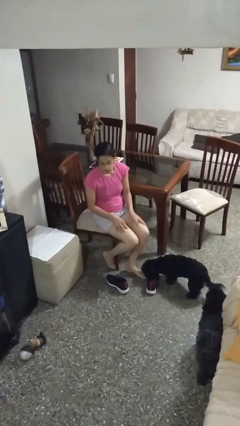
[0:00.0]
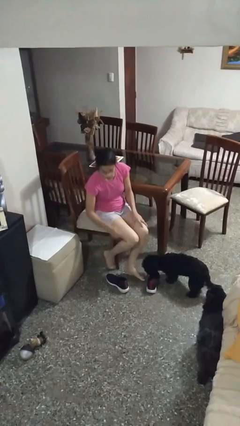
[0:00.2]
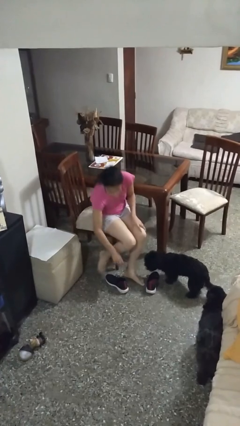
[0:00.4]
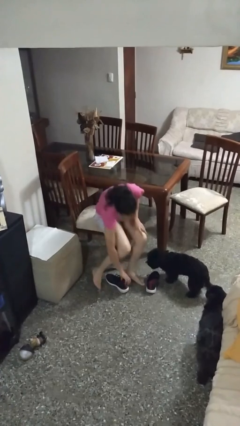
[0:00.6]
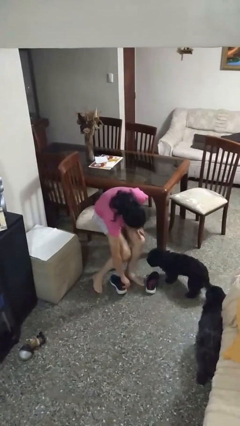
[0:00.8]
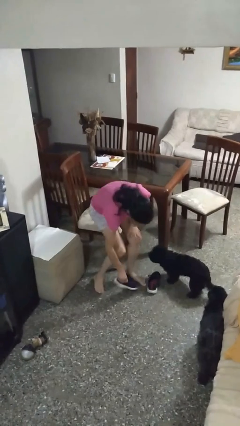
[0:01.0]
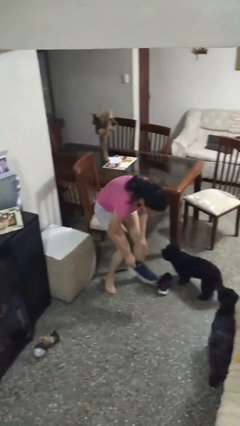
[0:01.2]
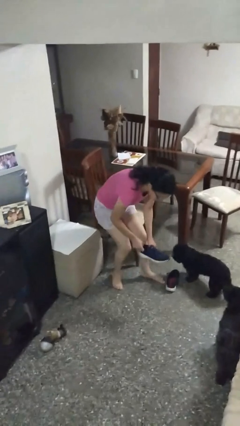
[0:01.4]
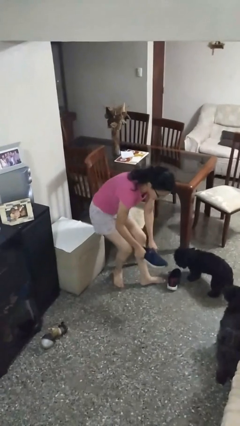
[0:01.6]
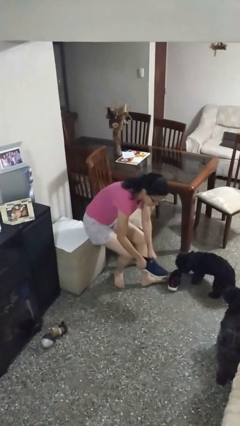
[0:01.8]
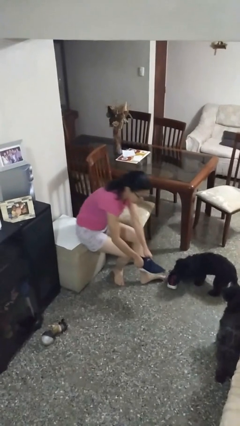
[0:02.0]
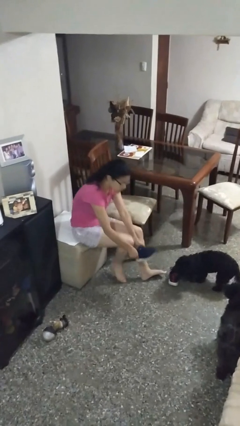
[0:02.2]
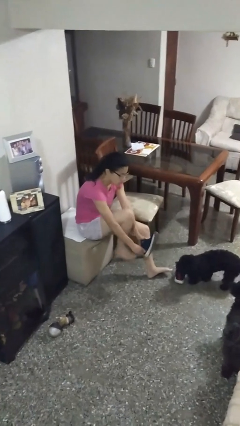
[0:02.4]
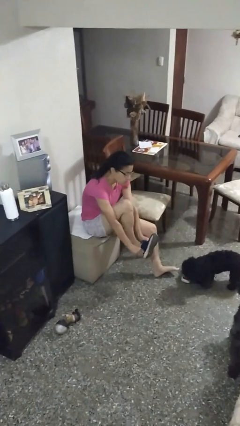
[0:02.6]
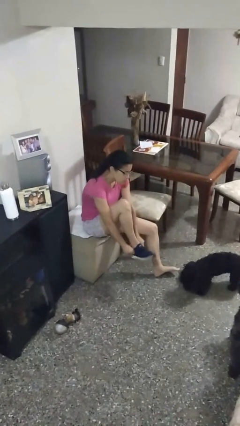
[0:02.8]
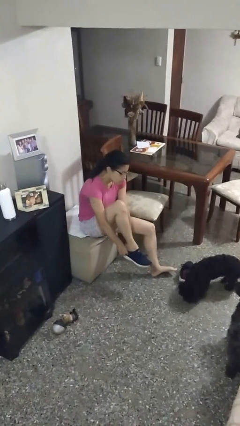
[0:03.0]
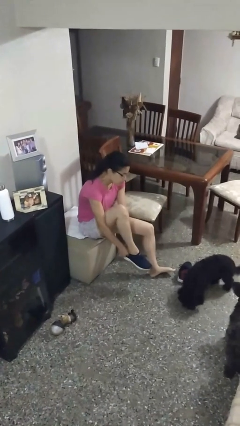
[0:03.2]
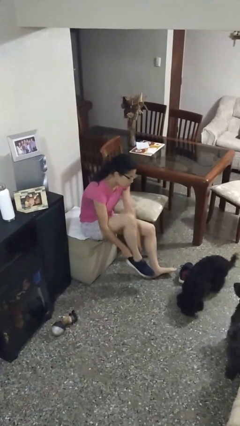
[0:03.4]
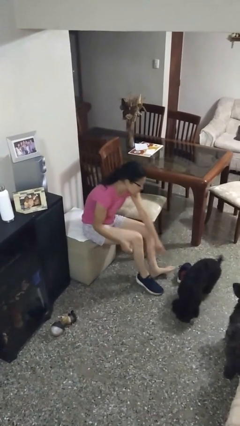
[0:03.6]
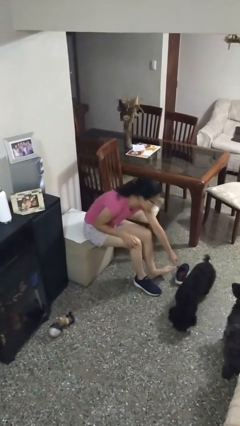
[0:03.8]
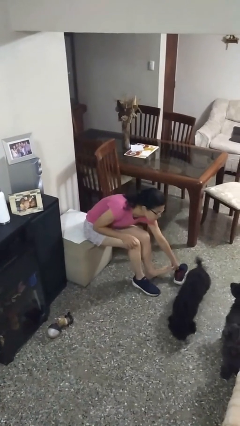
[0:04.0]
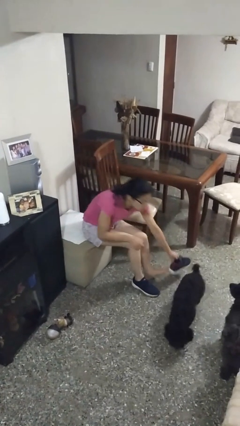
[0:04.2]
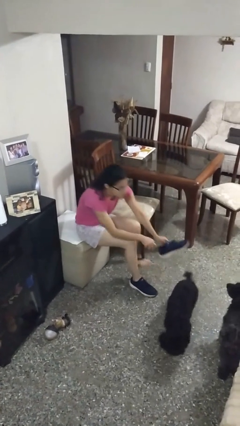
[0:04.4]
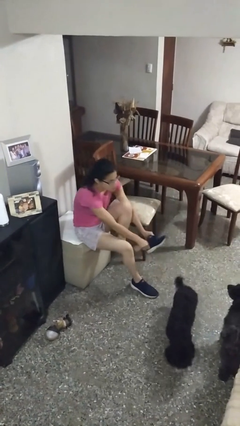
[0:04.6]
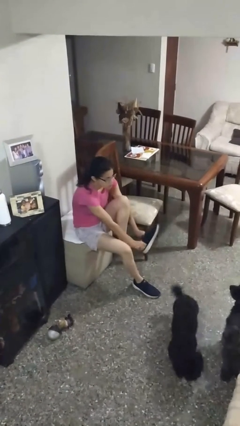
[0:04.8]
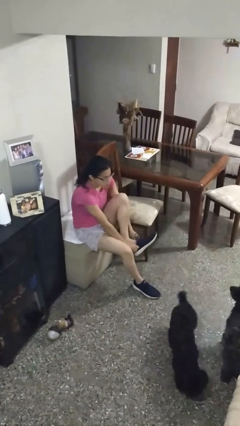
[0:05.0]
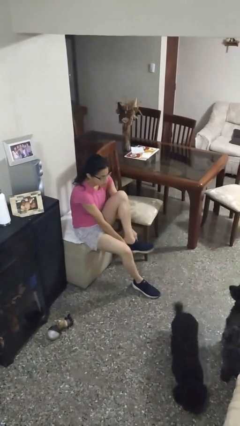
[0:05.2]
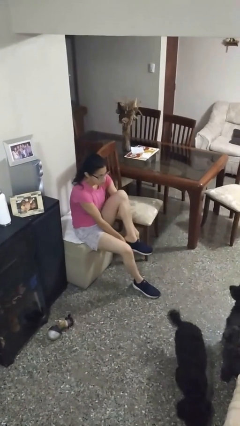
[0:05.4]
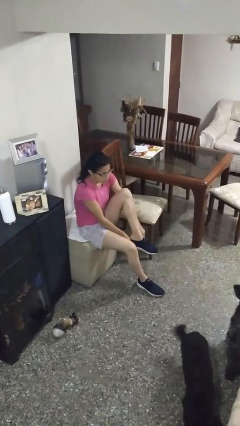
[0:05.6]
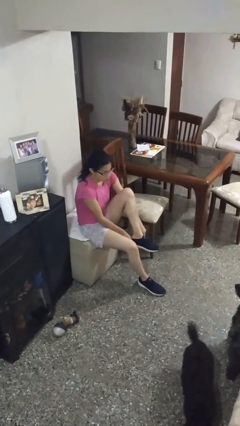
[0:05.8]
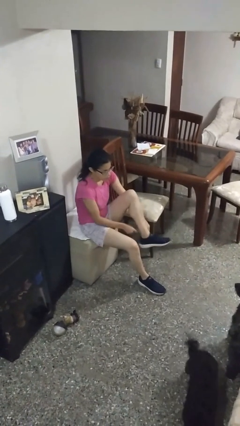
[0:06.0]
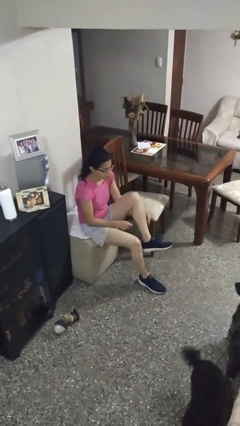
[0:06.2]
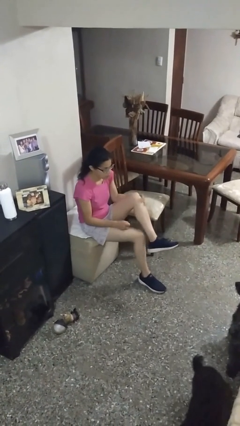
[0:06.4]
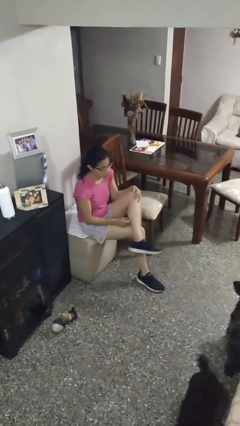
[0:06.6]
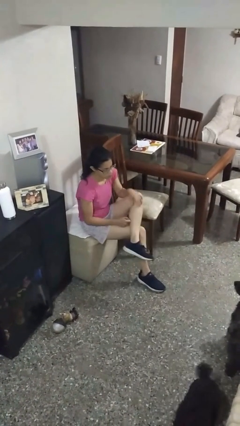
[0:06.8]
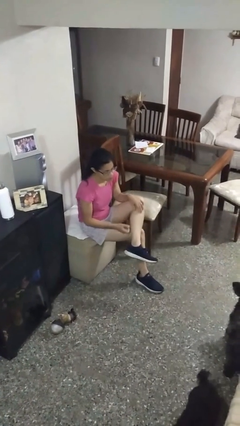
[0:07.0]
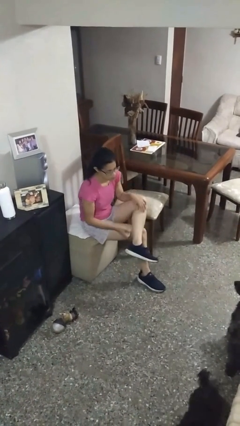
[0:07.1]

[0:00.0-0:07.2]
person puts on shoes

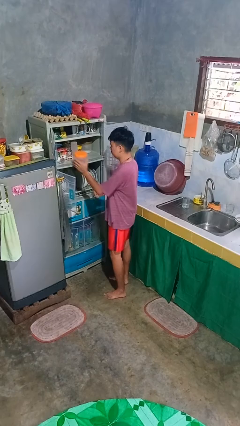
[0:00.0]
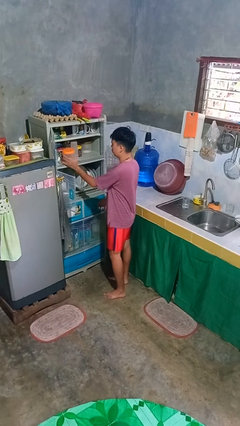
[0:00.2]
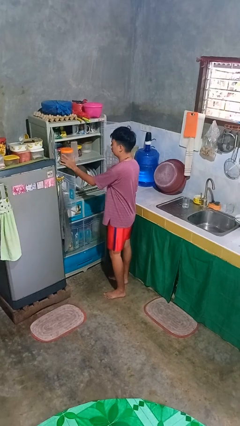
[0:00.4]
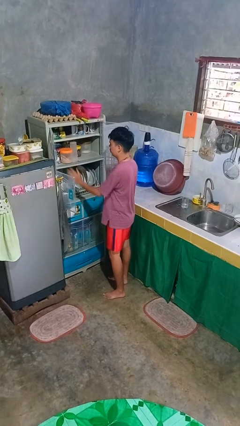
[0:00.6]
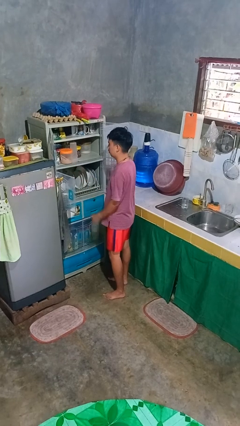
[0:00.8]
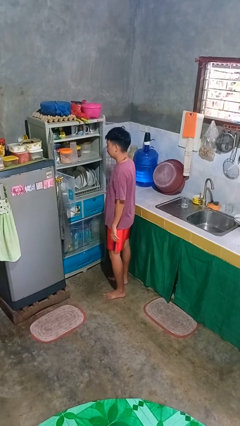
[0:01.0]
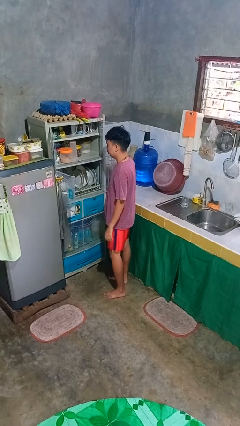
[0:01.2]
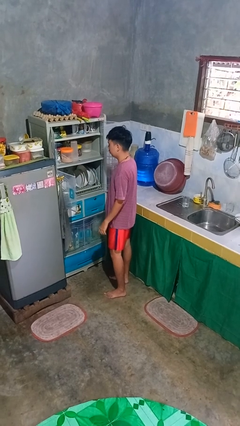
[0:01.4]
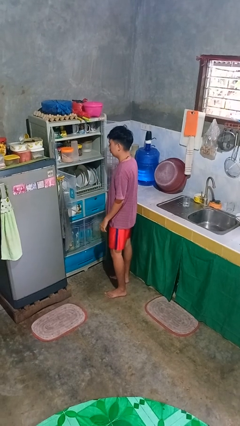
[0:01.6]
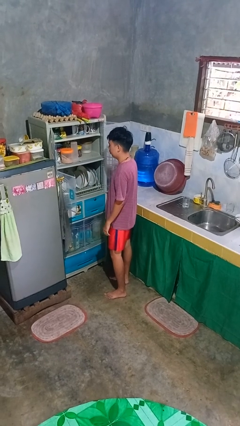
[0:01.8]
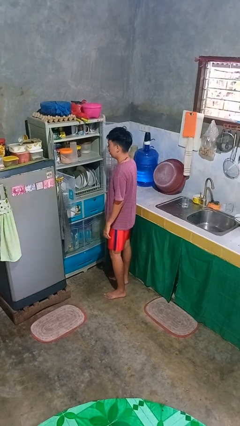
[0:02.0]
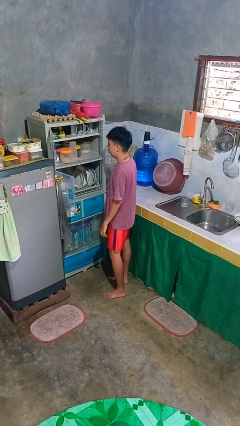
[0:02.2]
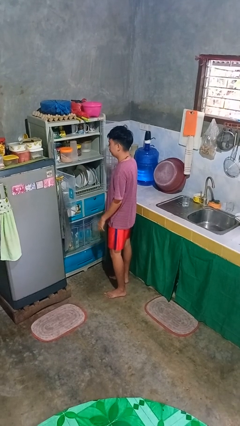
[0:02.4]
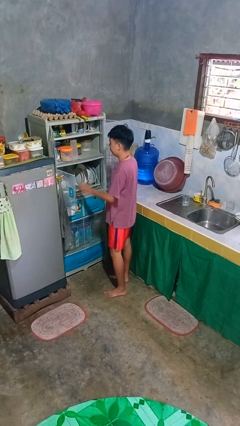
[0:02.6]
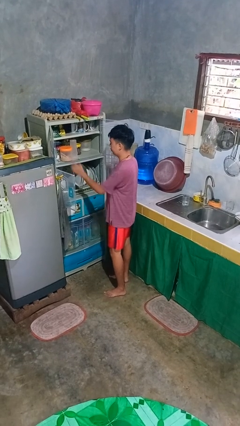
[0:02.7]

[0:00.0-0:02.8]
person puts object in cabinet

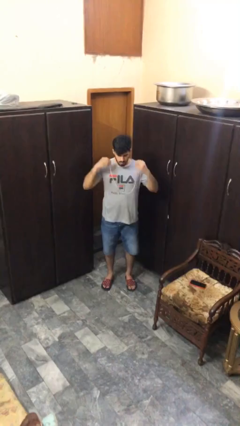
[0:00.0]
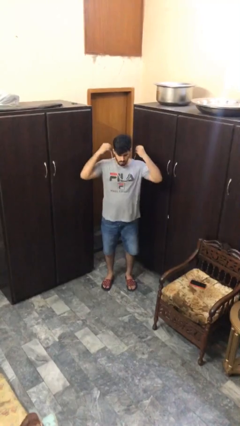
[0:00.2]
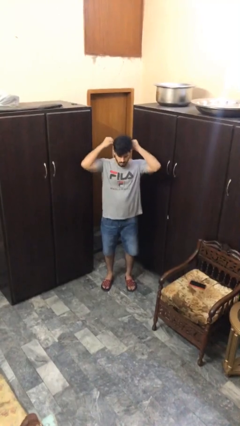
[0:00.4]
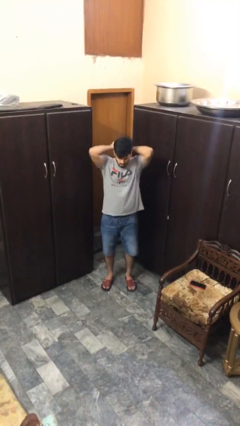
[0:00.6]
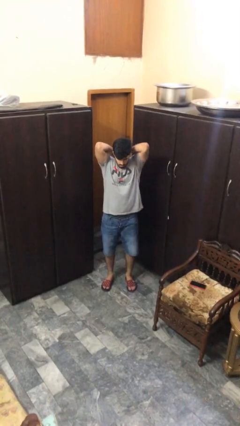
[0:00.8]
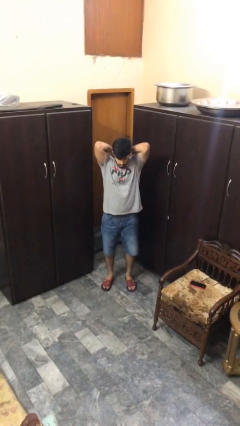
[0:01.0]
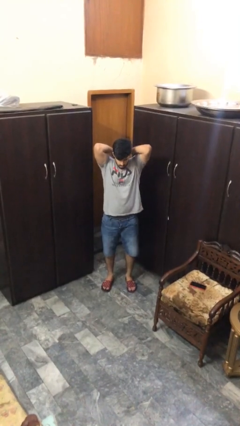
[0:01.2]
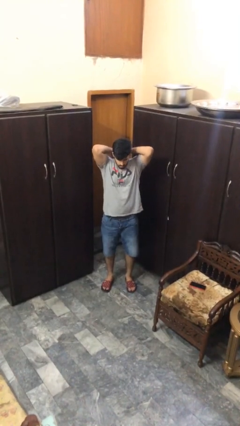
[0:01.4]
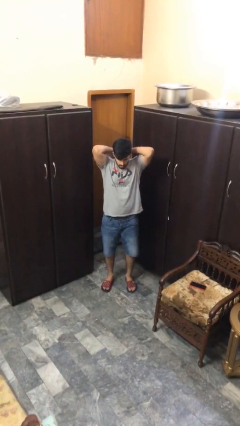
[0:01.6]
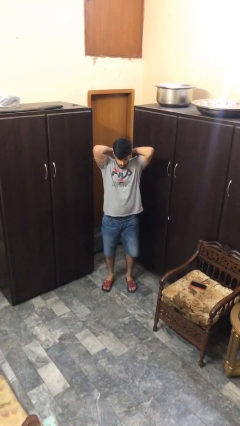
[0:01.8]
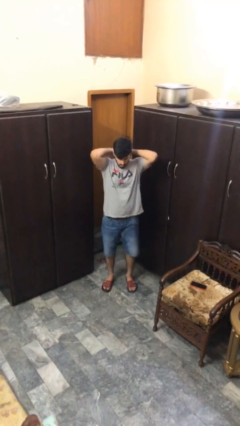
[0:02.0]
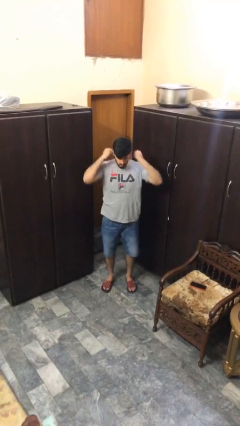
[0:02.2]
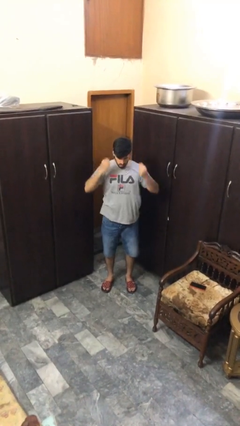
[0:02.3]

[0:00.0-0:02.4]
person puts on necklace

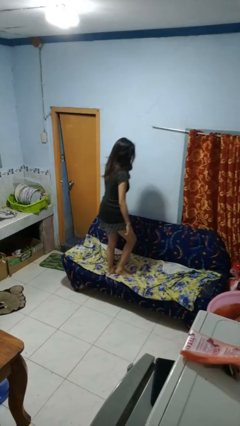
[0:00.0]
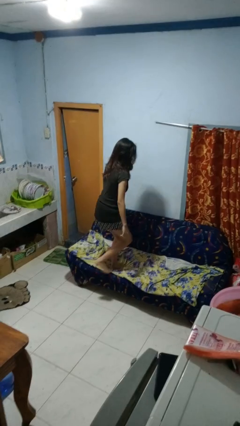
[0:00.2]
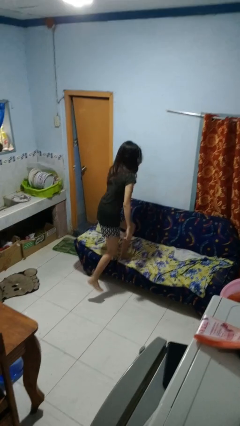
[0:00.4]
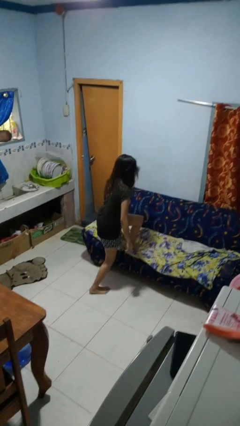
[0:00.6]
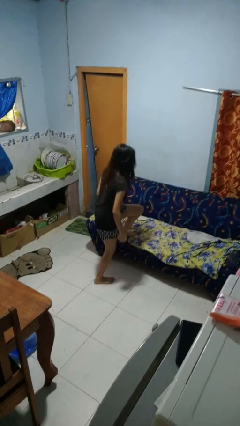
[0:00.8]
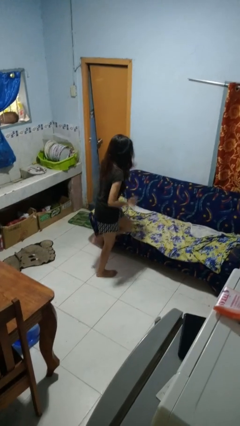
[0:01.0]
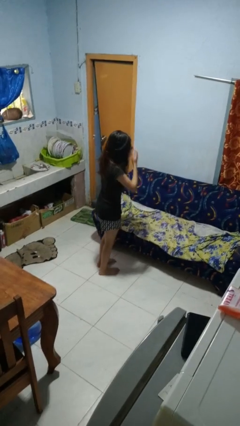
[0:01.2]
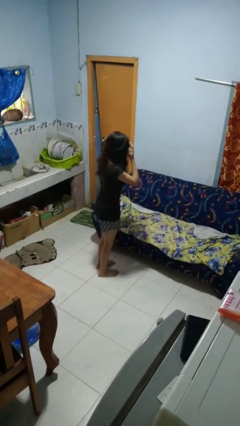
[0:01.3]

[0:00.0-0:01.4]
person climbs off couch

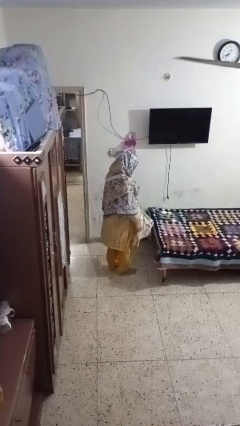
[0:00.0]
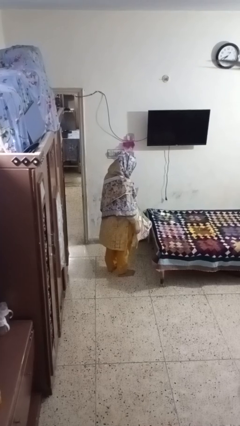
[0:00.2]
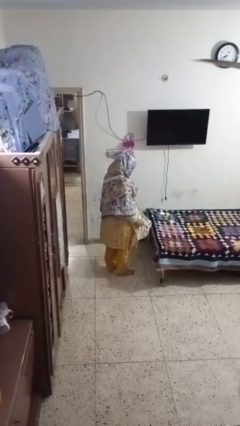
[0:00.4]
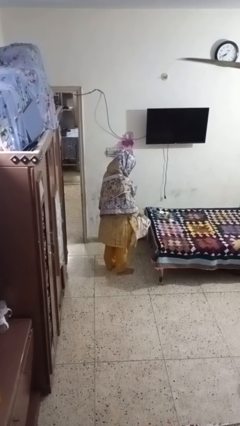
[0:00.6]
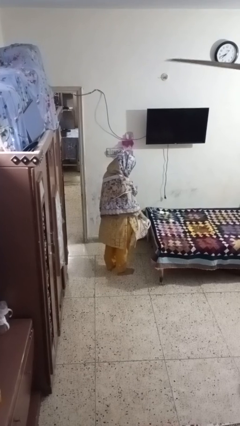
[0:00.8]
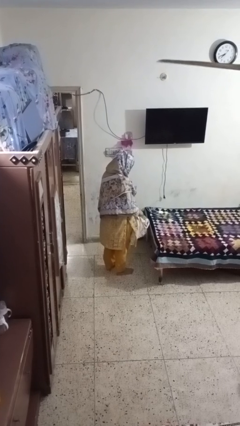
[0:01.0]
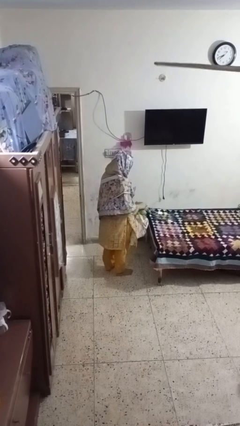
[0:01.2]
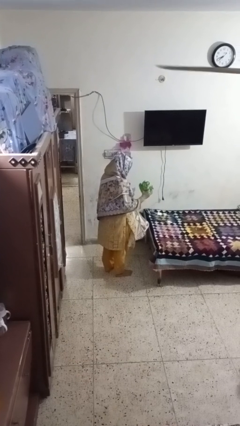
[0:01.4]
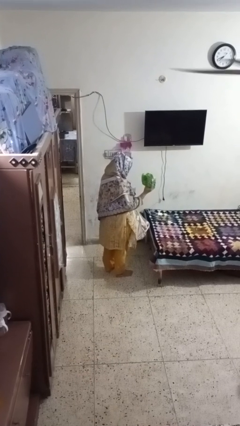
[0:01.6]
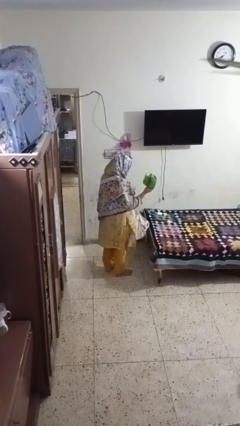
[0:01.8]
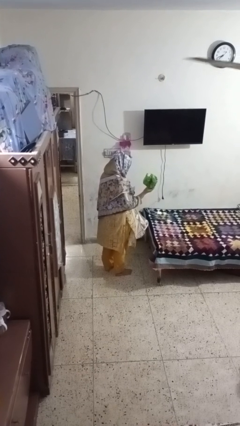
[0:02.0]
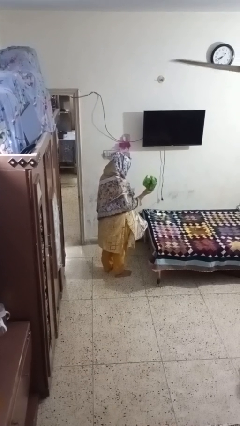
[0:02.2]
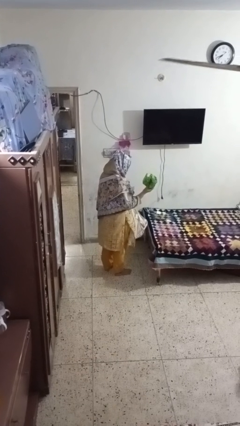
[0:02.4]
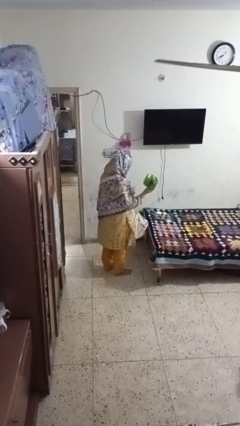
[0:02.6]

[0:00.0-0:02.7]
person takes object from bag

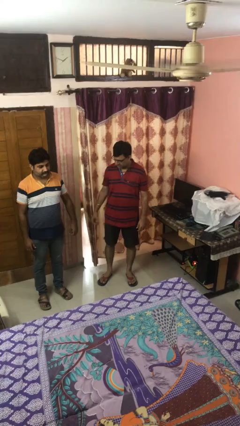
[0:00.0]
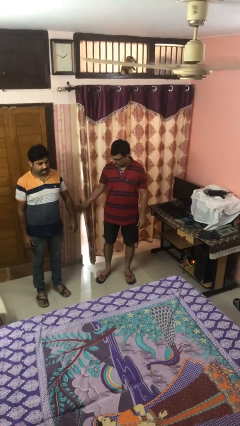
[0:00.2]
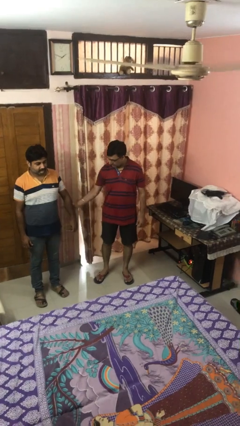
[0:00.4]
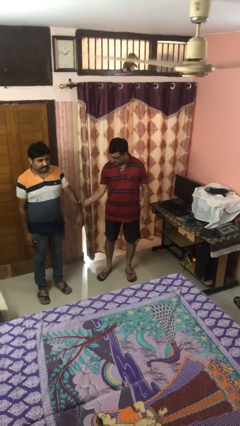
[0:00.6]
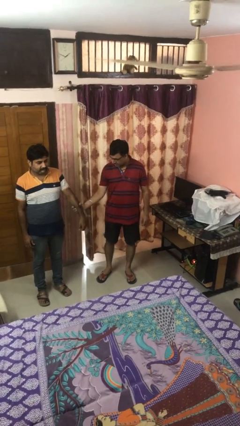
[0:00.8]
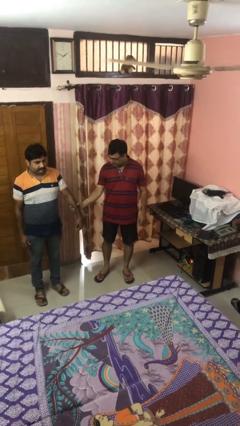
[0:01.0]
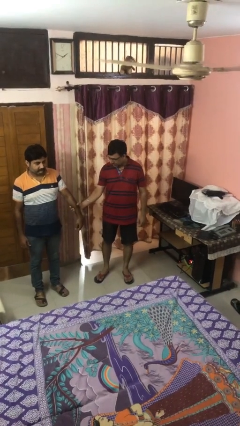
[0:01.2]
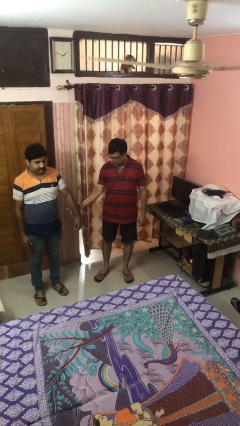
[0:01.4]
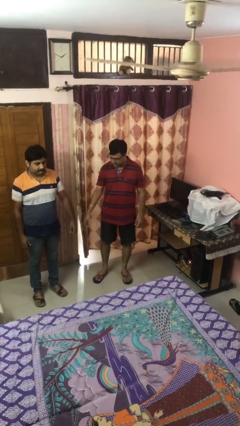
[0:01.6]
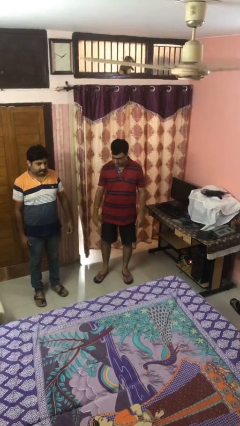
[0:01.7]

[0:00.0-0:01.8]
person grabs person by forearm
